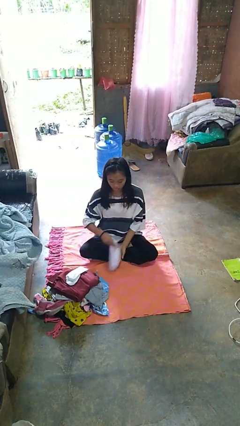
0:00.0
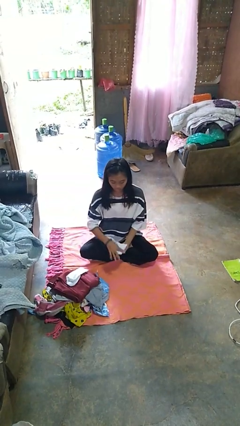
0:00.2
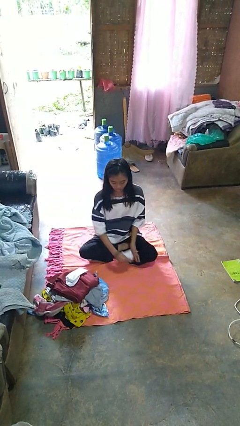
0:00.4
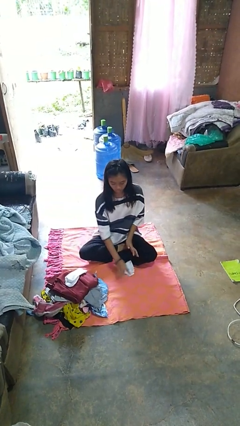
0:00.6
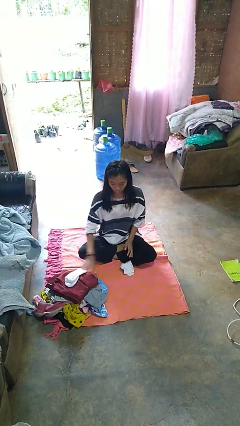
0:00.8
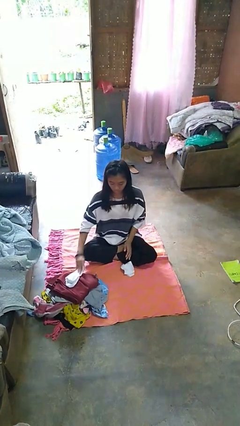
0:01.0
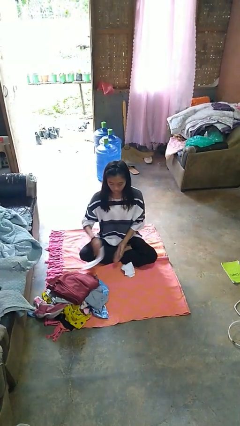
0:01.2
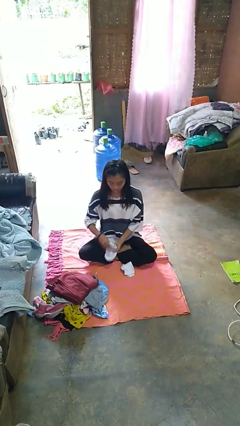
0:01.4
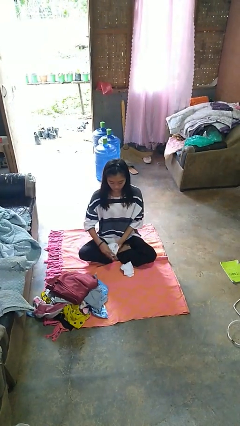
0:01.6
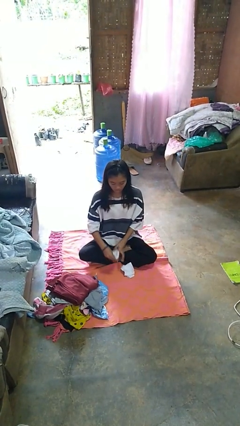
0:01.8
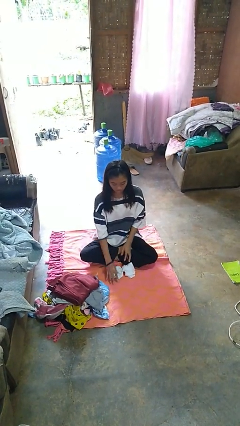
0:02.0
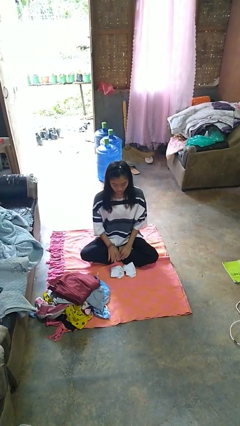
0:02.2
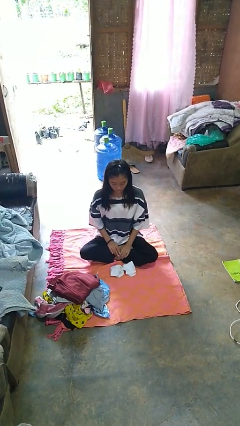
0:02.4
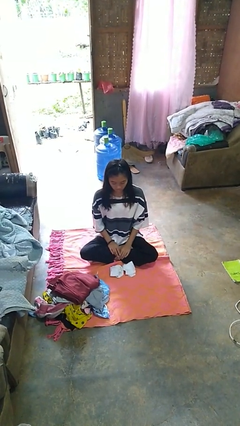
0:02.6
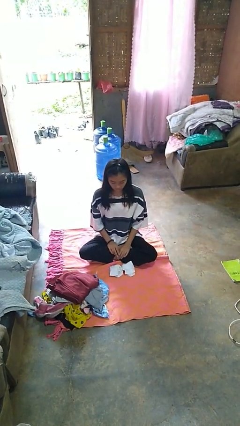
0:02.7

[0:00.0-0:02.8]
person folds socks

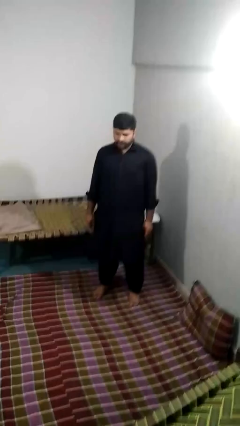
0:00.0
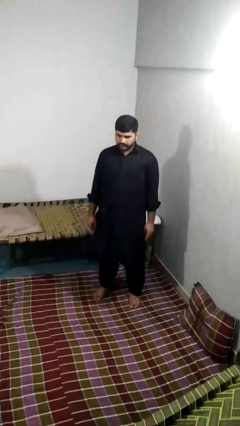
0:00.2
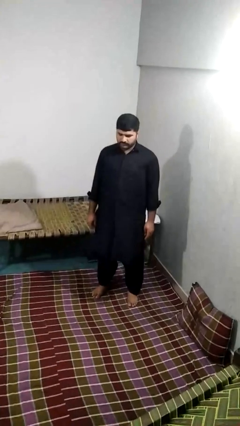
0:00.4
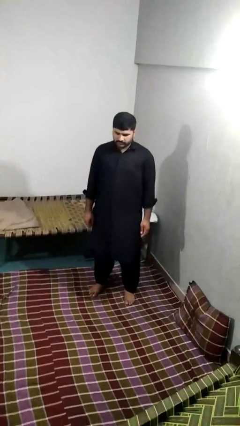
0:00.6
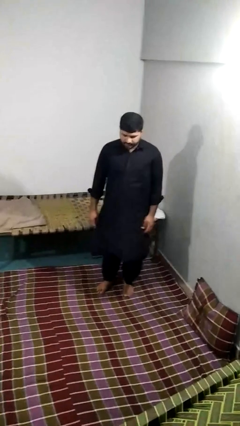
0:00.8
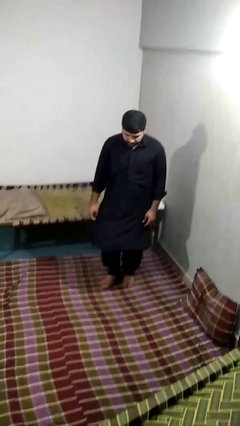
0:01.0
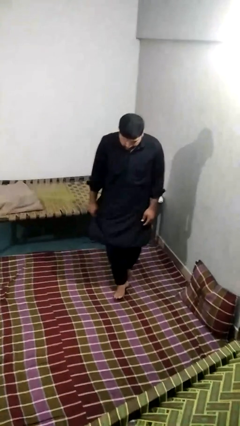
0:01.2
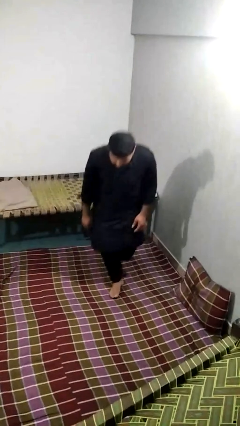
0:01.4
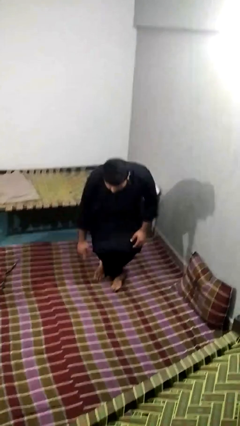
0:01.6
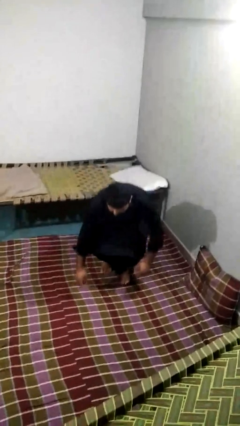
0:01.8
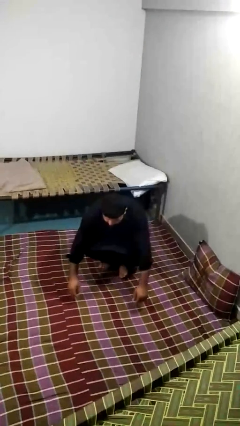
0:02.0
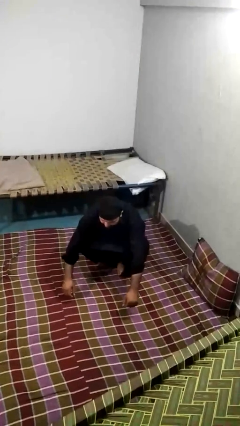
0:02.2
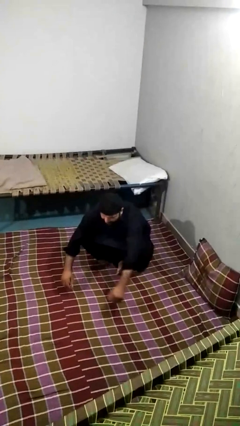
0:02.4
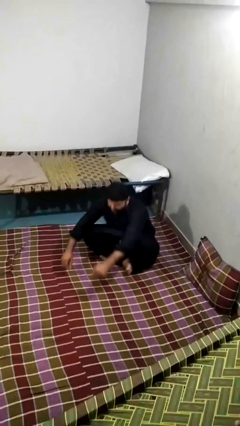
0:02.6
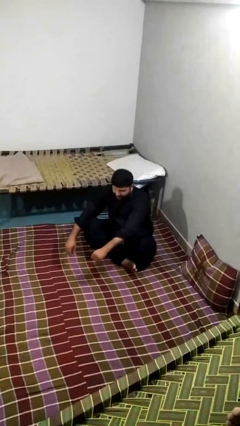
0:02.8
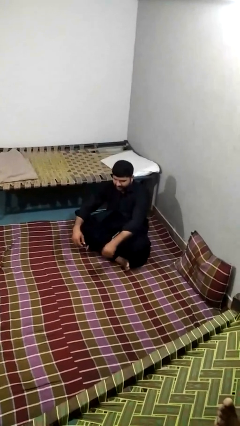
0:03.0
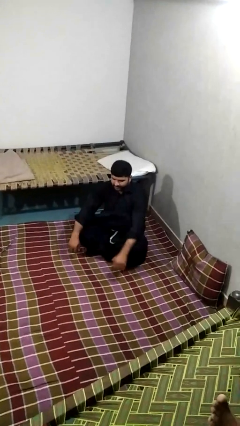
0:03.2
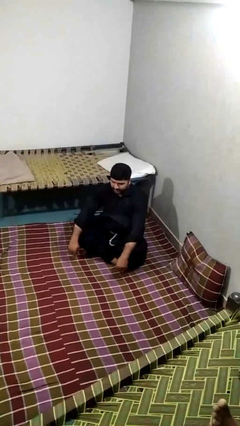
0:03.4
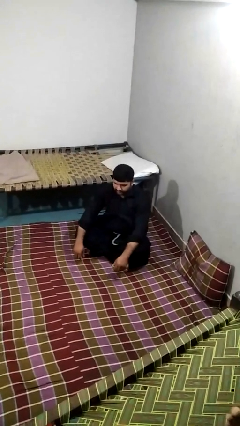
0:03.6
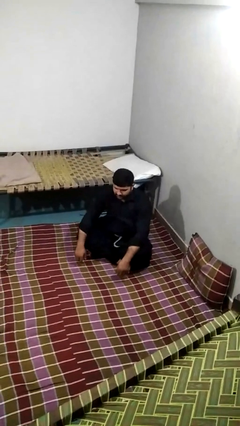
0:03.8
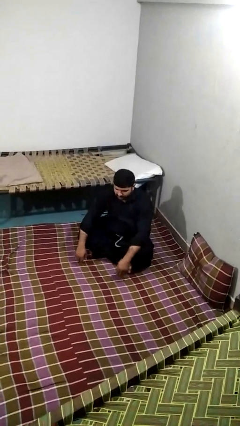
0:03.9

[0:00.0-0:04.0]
person sits crisscross

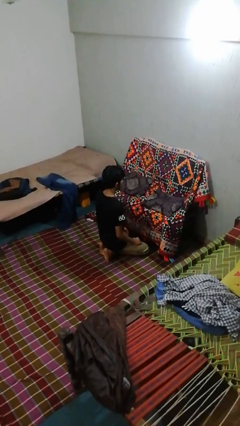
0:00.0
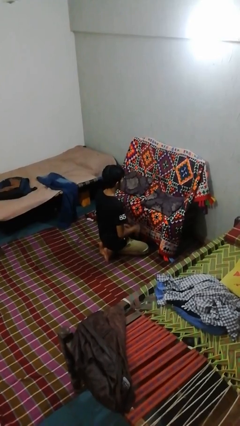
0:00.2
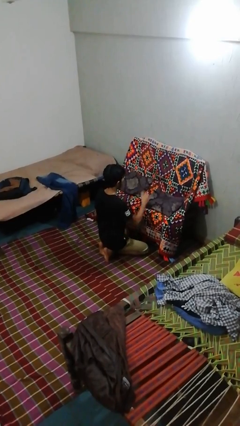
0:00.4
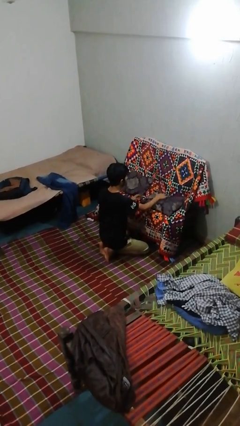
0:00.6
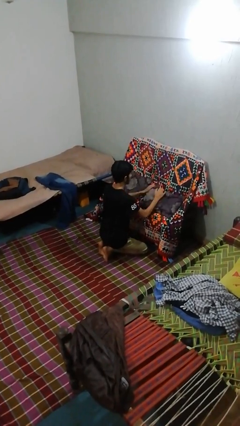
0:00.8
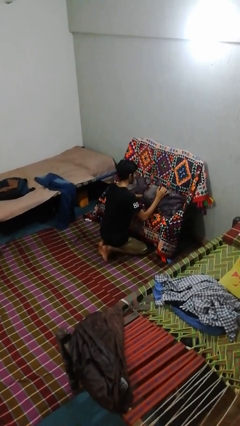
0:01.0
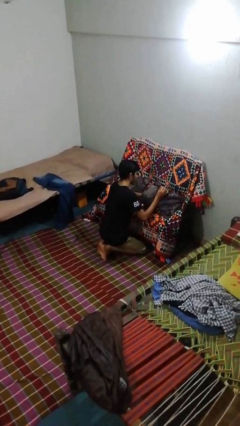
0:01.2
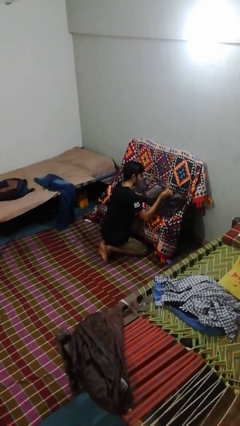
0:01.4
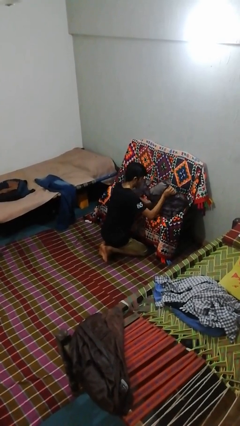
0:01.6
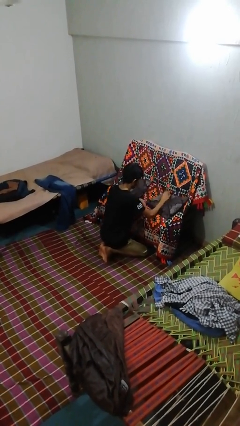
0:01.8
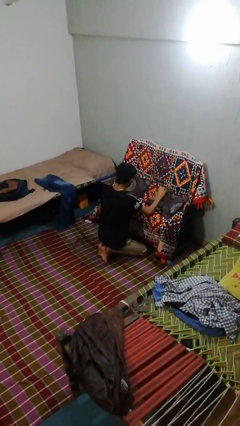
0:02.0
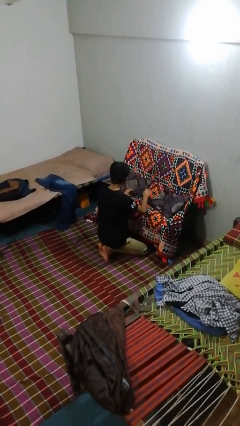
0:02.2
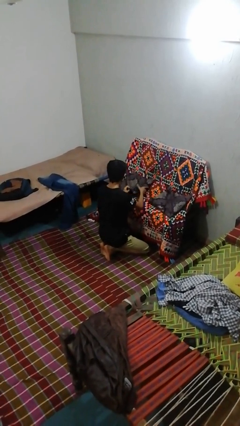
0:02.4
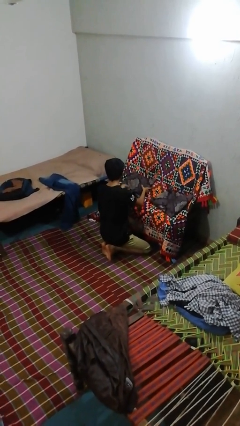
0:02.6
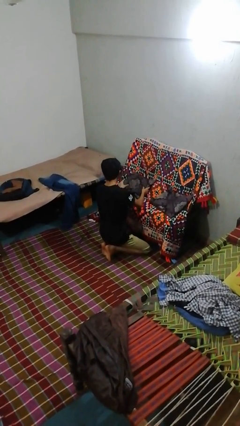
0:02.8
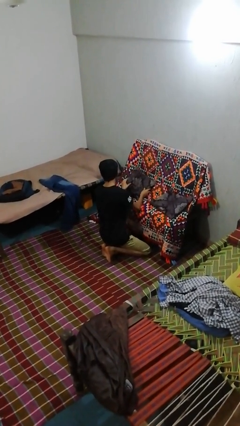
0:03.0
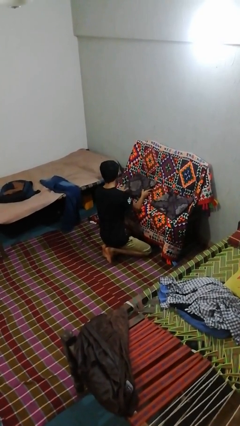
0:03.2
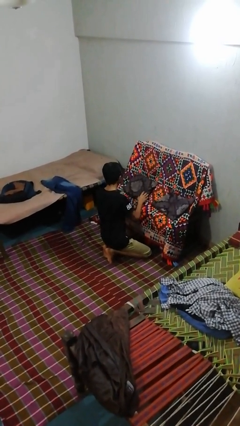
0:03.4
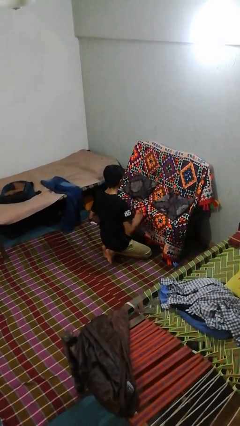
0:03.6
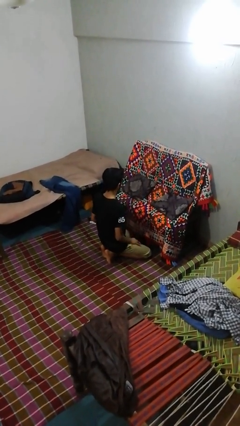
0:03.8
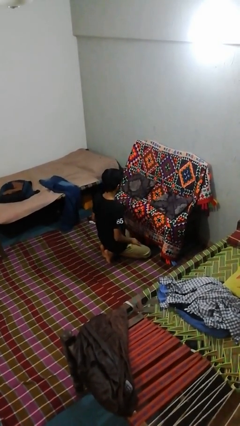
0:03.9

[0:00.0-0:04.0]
person searches in couch

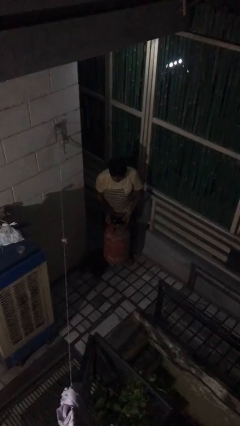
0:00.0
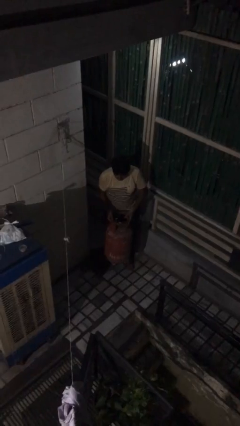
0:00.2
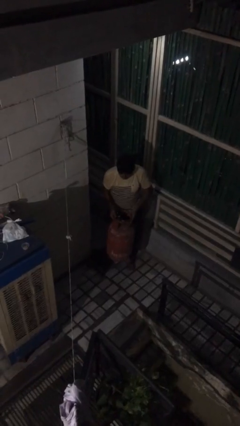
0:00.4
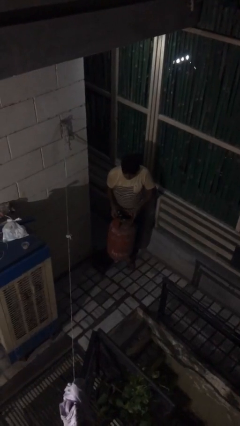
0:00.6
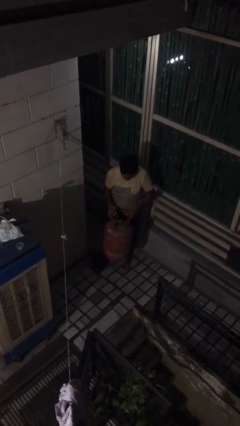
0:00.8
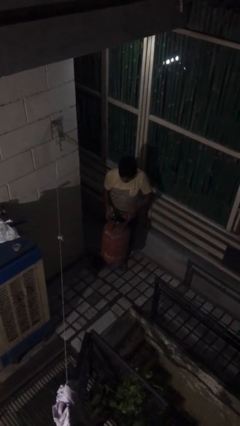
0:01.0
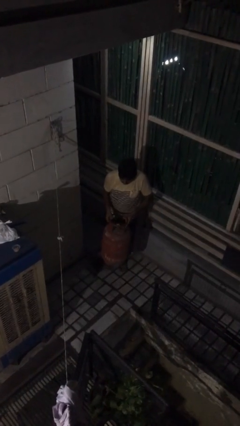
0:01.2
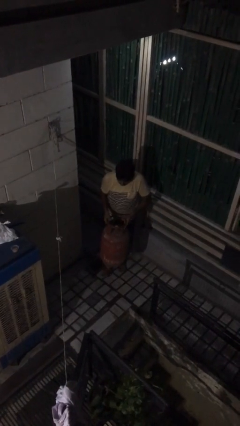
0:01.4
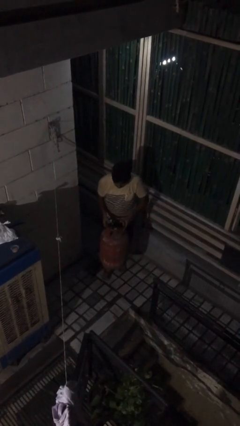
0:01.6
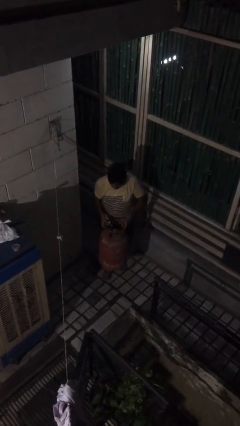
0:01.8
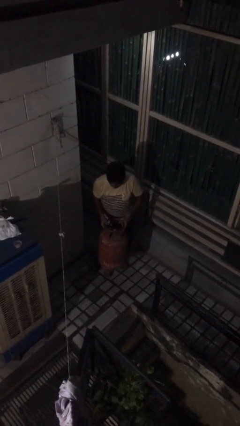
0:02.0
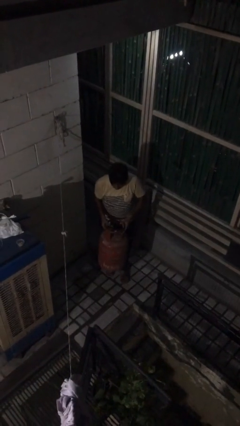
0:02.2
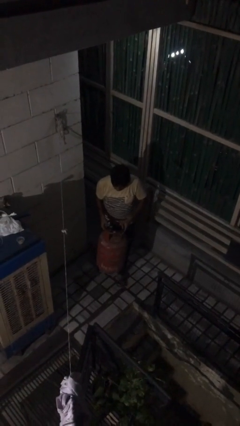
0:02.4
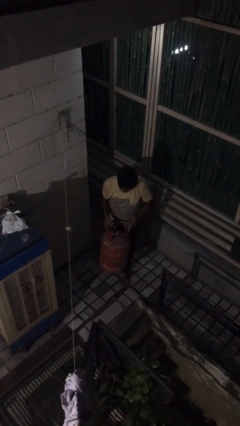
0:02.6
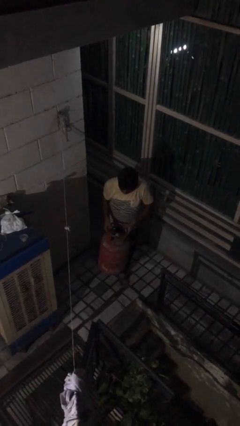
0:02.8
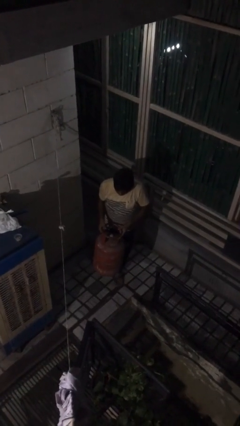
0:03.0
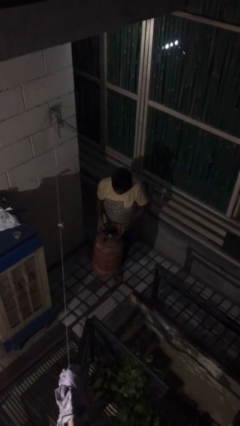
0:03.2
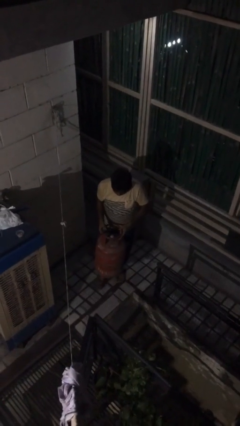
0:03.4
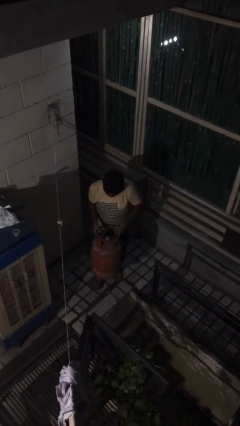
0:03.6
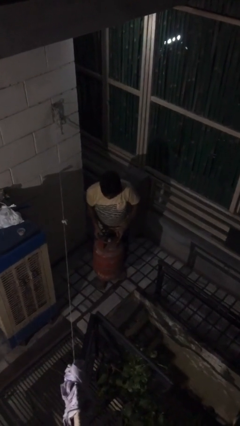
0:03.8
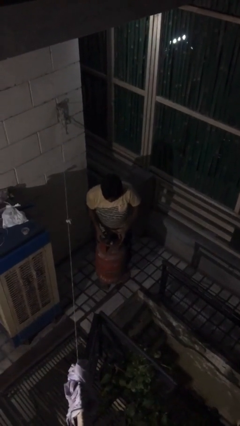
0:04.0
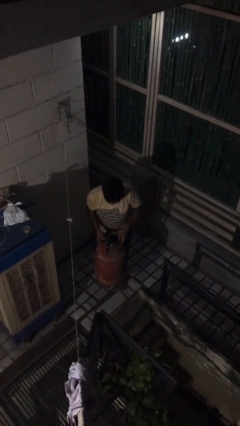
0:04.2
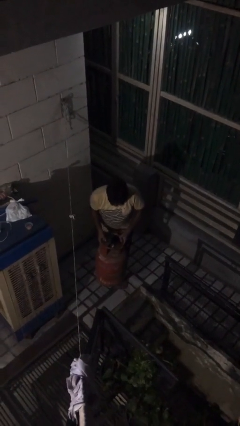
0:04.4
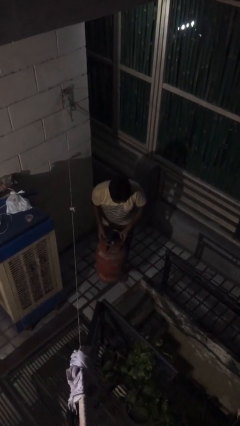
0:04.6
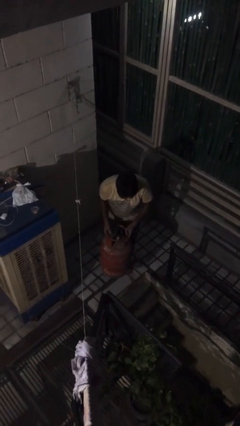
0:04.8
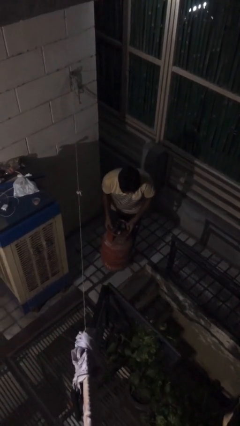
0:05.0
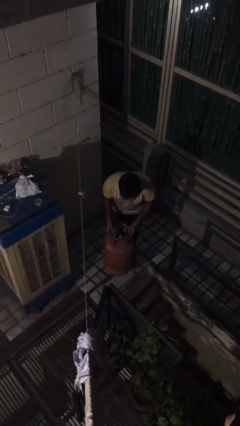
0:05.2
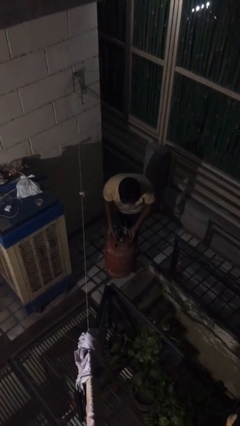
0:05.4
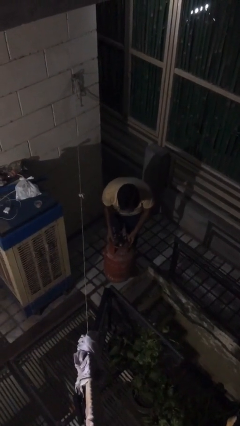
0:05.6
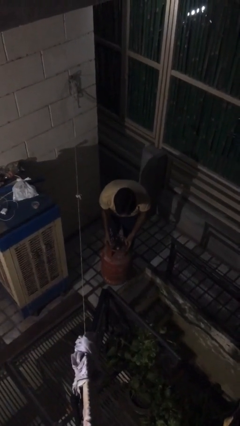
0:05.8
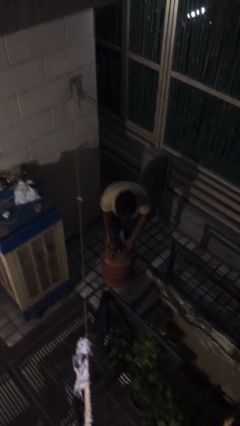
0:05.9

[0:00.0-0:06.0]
person carries heavy object

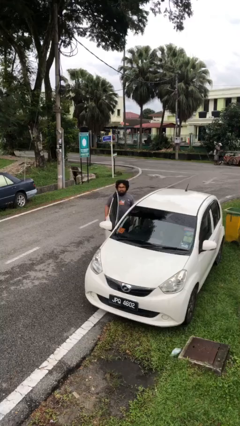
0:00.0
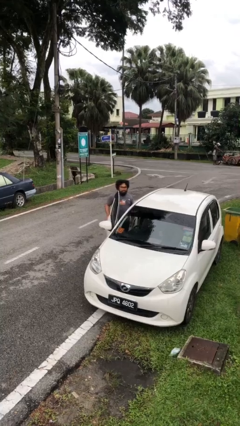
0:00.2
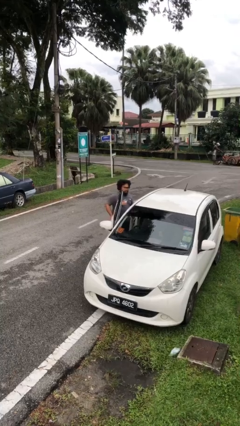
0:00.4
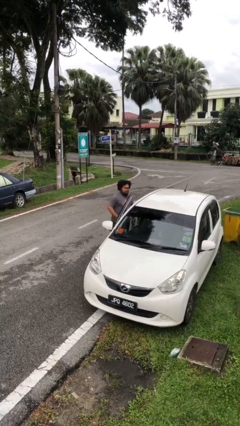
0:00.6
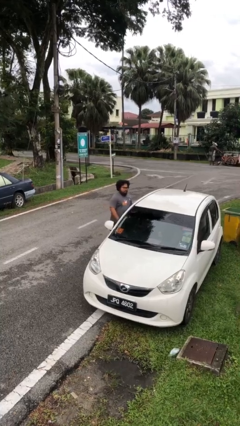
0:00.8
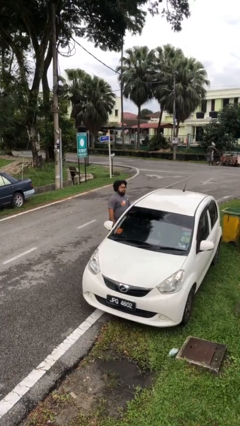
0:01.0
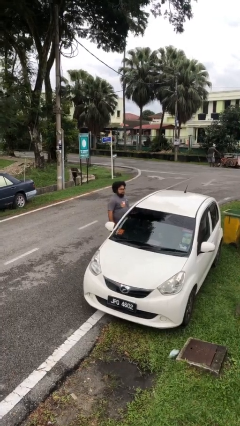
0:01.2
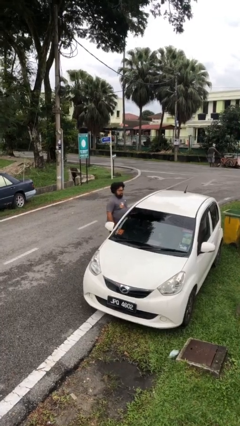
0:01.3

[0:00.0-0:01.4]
person closes car door
